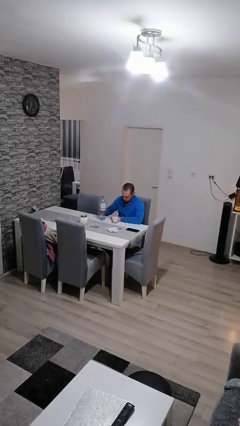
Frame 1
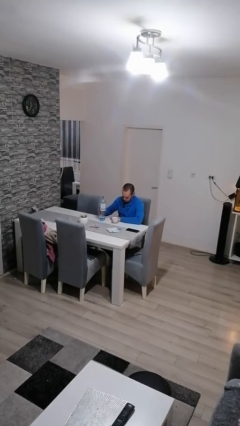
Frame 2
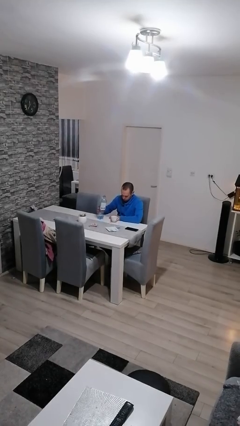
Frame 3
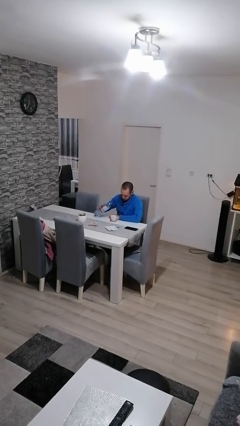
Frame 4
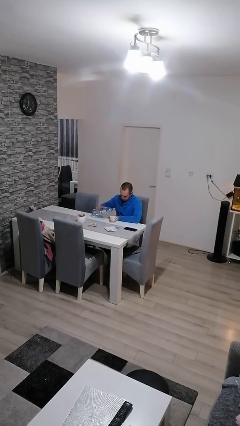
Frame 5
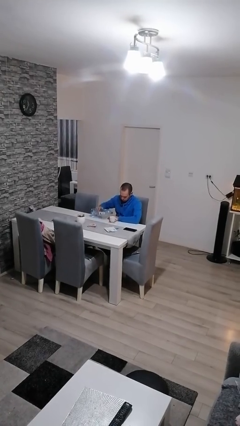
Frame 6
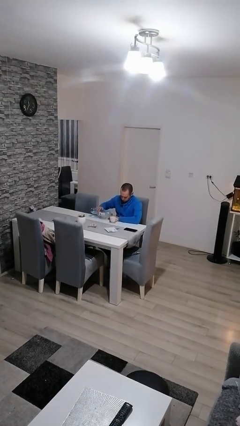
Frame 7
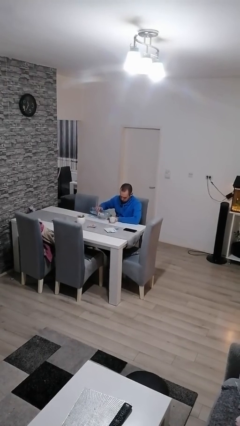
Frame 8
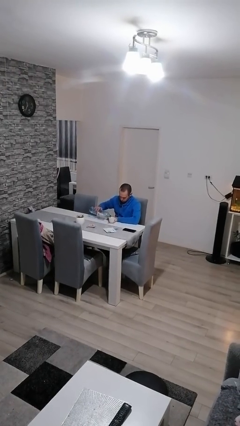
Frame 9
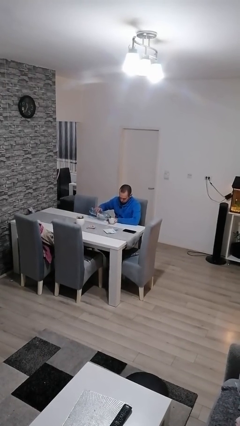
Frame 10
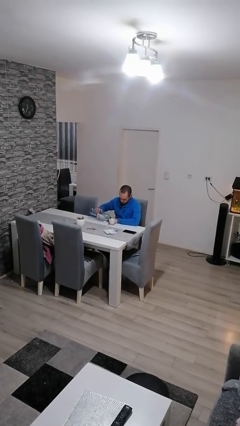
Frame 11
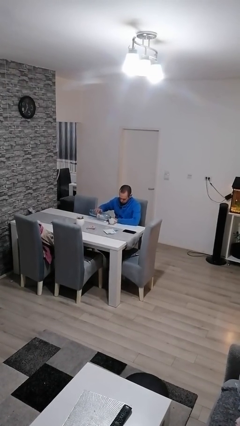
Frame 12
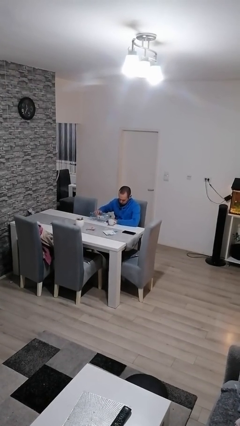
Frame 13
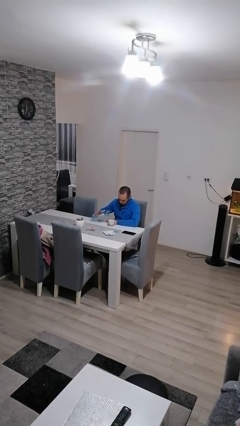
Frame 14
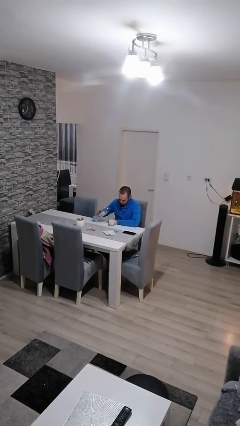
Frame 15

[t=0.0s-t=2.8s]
person pours liquid into cup

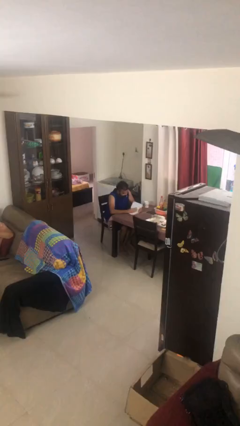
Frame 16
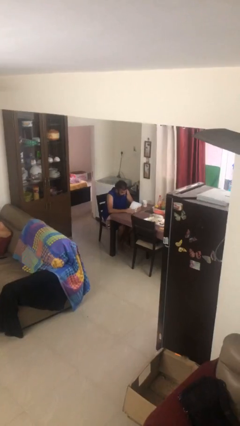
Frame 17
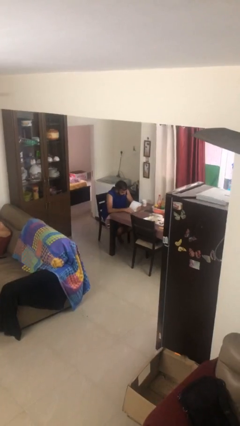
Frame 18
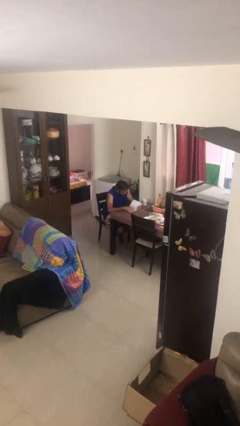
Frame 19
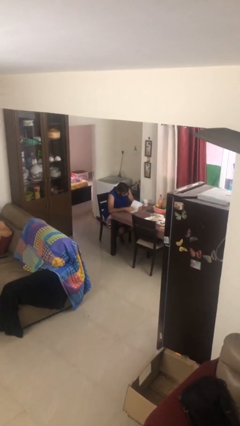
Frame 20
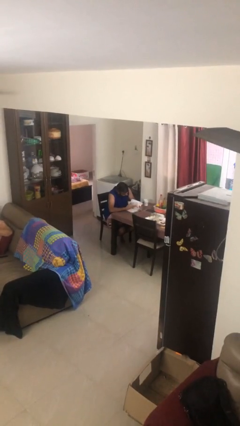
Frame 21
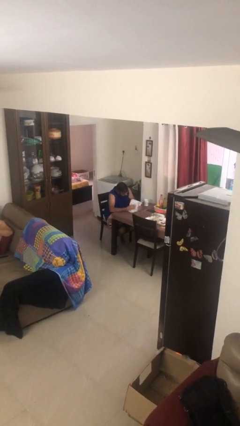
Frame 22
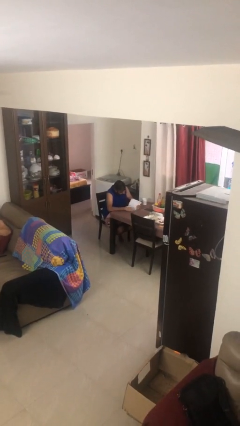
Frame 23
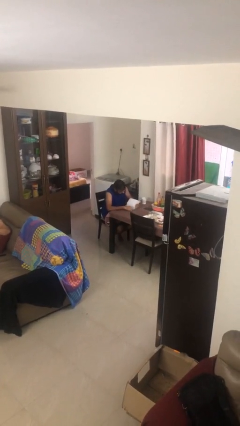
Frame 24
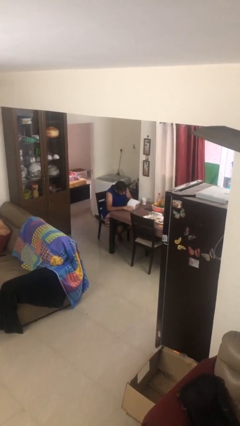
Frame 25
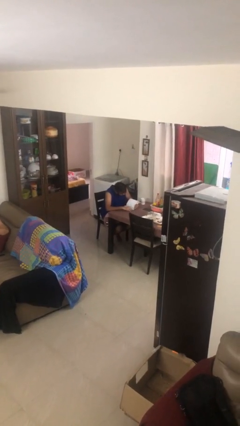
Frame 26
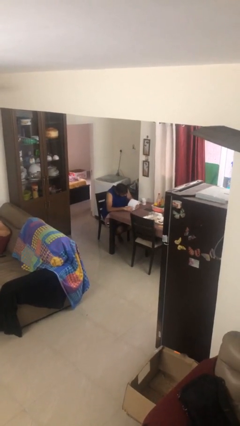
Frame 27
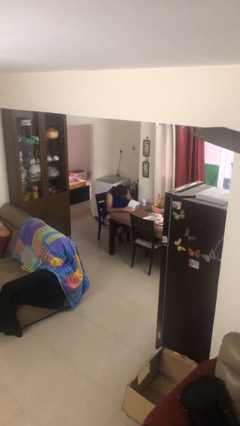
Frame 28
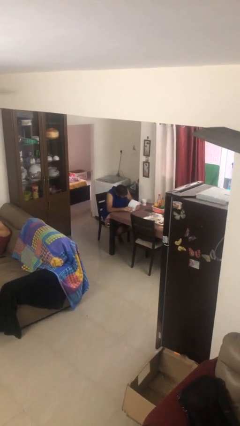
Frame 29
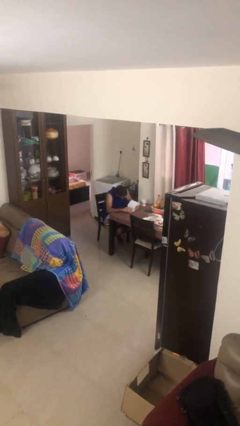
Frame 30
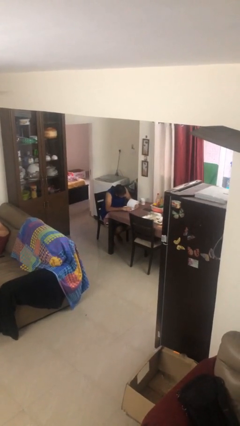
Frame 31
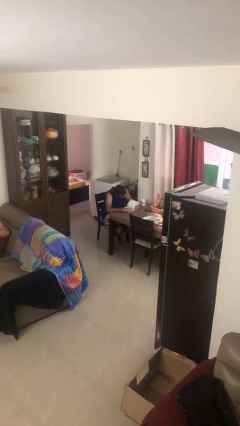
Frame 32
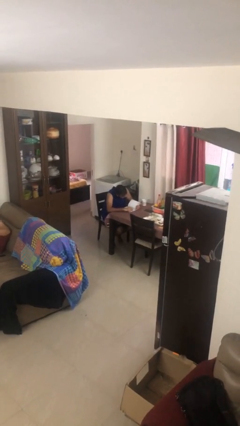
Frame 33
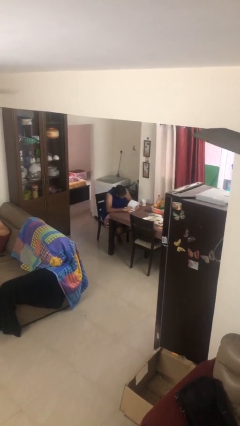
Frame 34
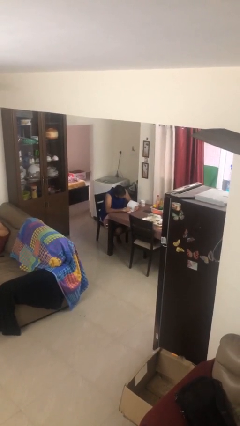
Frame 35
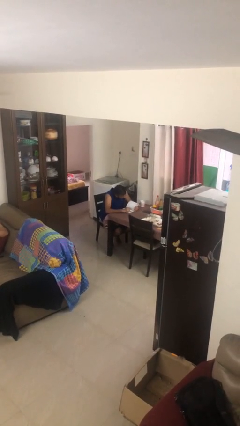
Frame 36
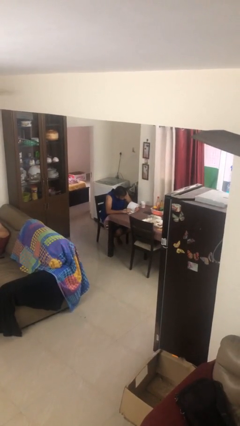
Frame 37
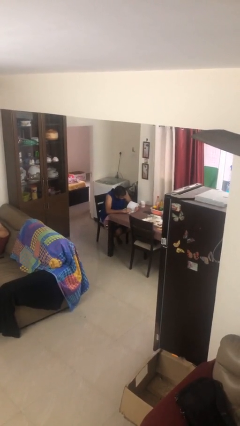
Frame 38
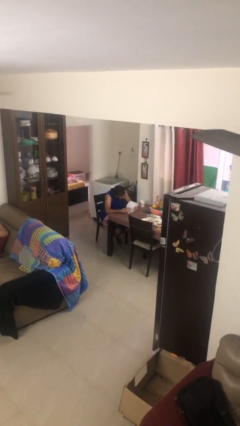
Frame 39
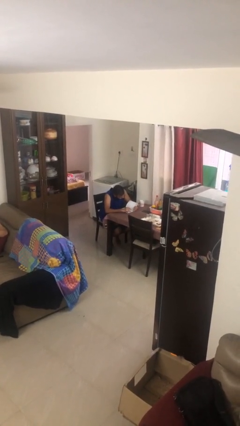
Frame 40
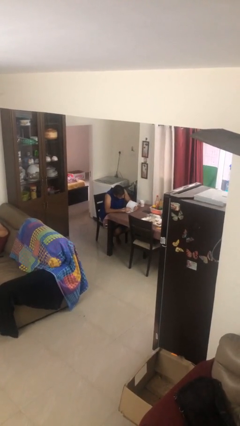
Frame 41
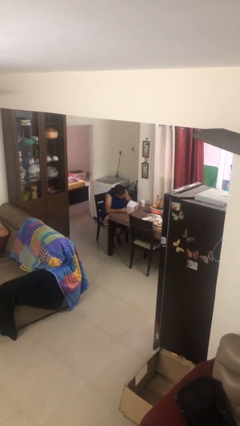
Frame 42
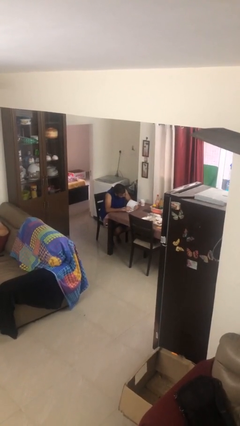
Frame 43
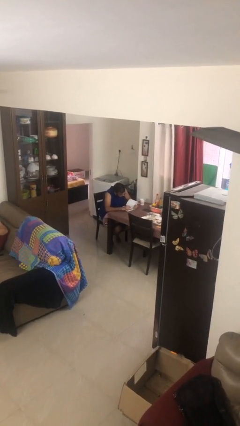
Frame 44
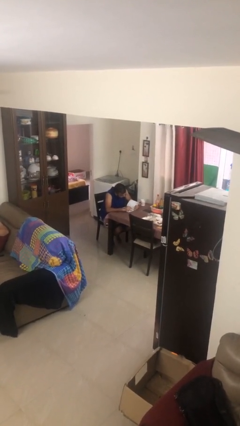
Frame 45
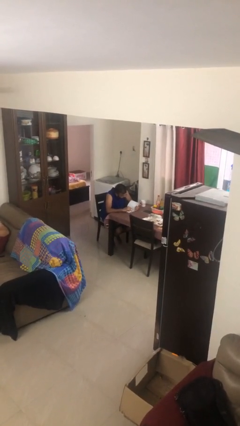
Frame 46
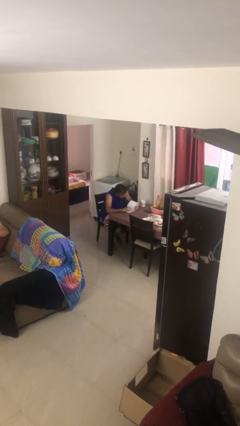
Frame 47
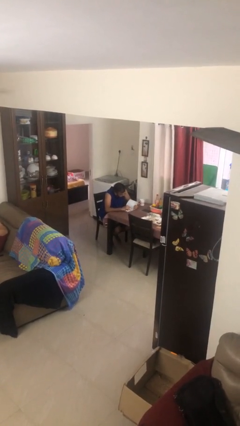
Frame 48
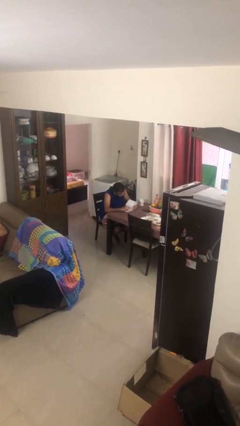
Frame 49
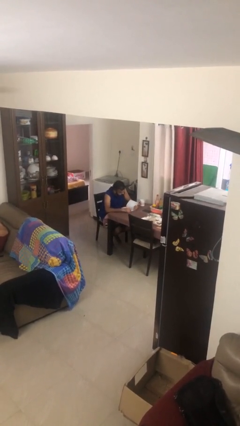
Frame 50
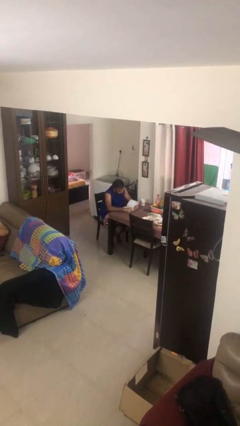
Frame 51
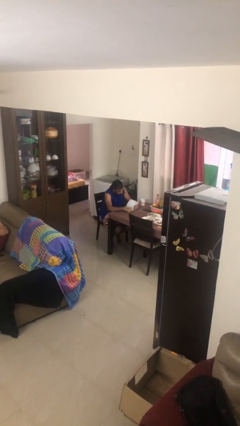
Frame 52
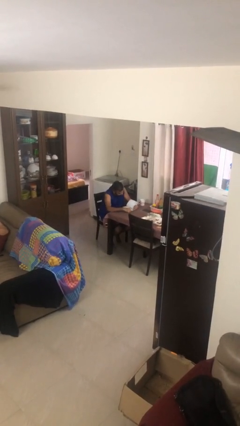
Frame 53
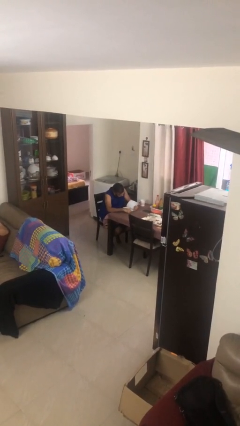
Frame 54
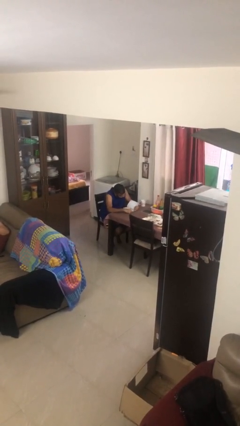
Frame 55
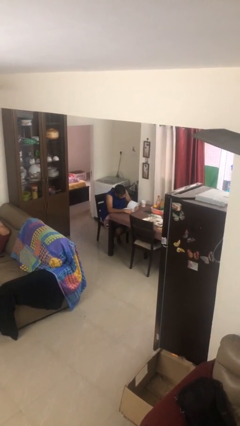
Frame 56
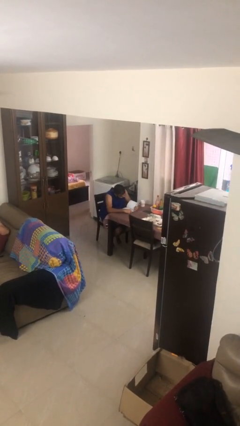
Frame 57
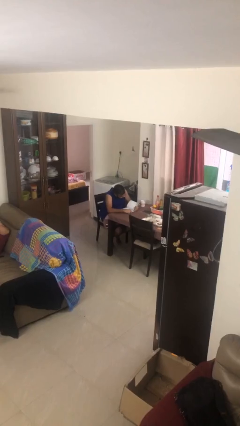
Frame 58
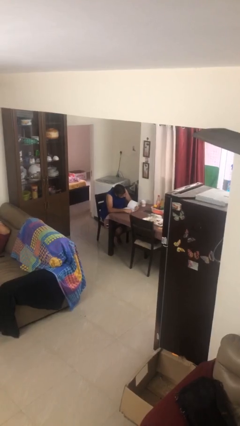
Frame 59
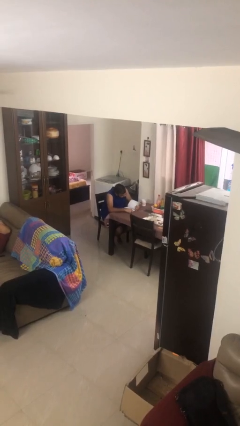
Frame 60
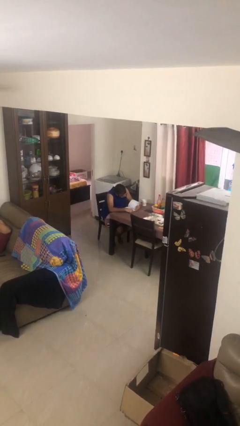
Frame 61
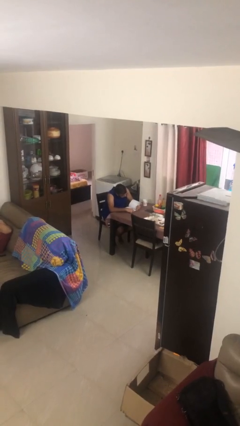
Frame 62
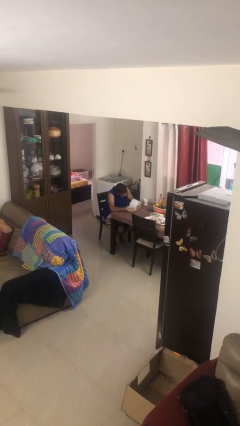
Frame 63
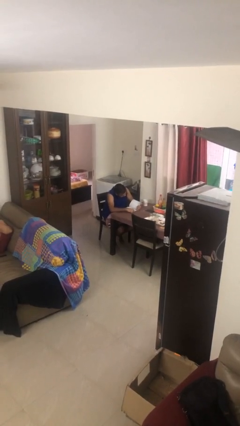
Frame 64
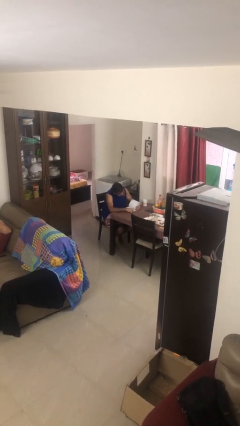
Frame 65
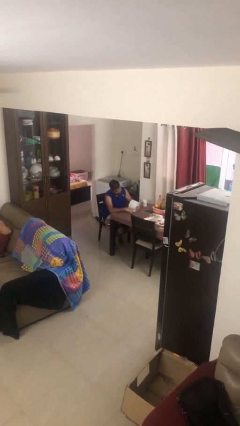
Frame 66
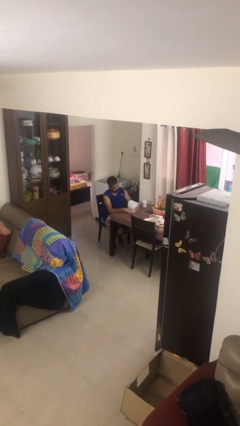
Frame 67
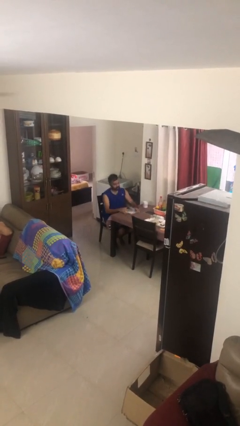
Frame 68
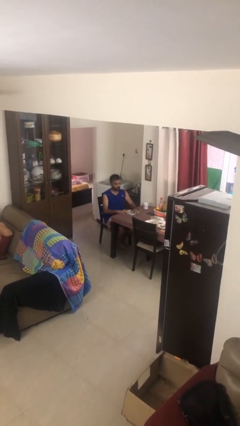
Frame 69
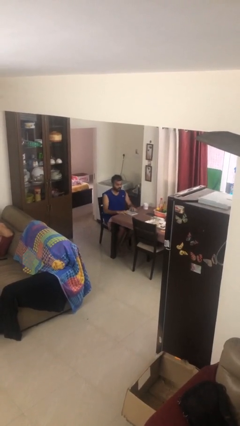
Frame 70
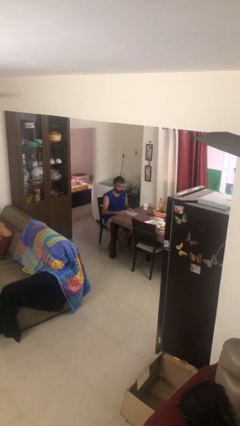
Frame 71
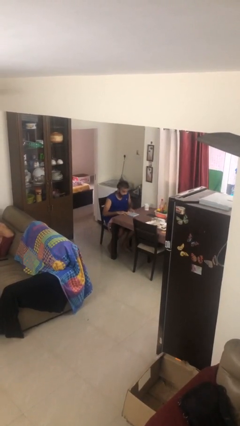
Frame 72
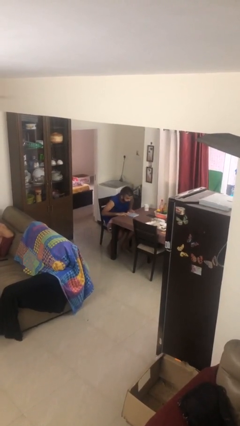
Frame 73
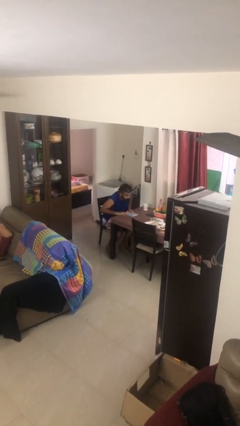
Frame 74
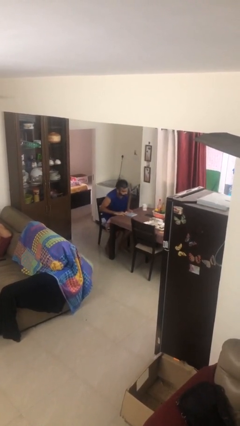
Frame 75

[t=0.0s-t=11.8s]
person reads document

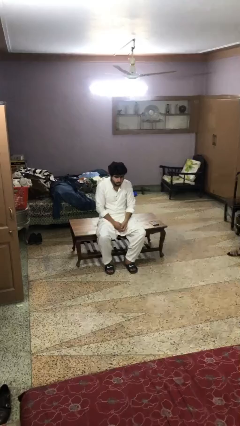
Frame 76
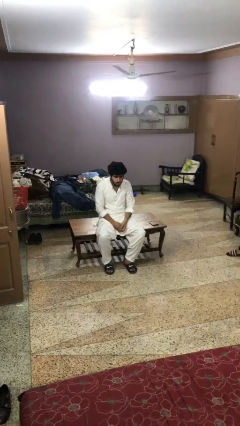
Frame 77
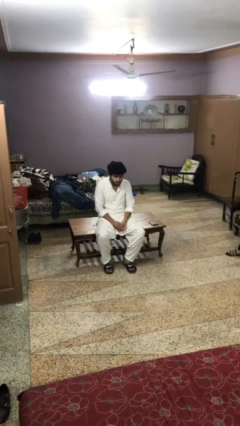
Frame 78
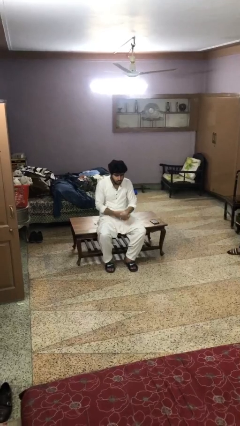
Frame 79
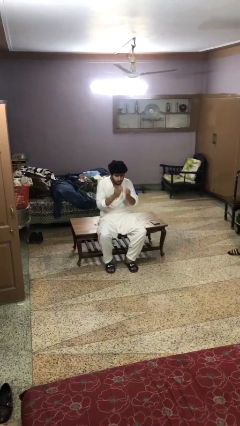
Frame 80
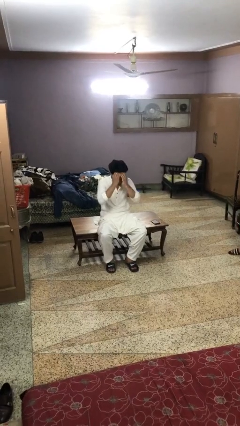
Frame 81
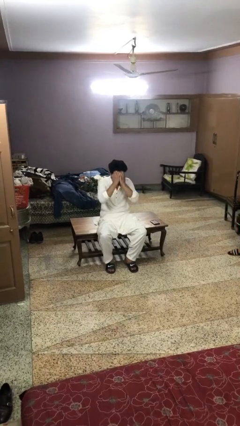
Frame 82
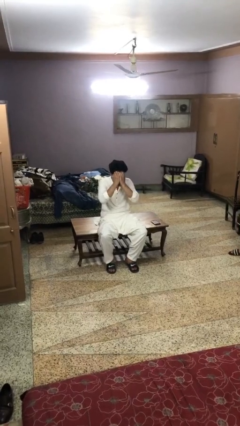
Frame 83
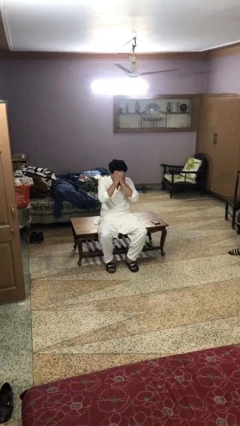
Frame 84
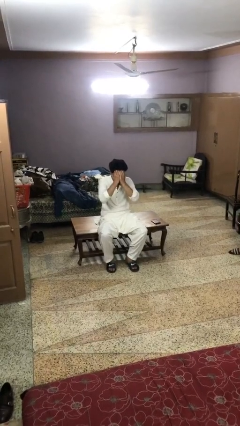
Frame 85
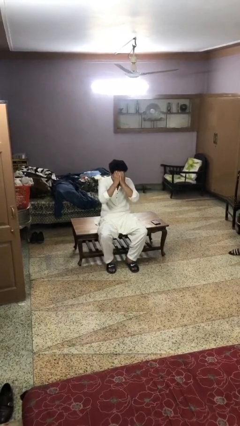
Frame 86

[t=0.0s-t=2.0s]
person covers face with hands

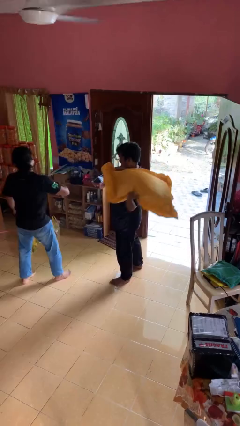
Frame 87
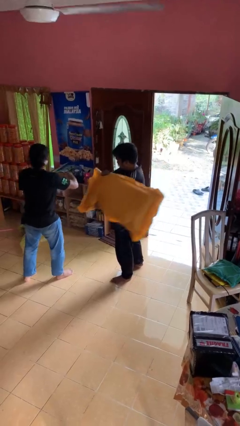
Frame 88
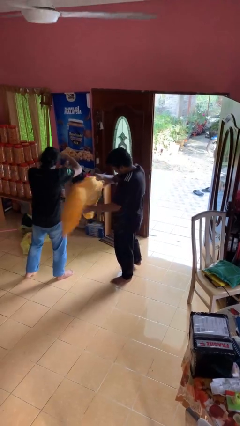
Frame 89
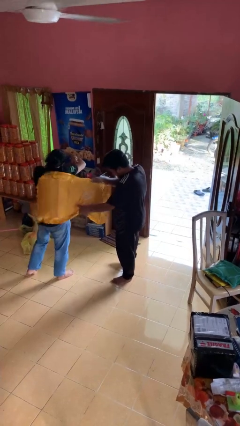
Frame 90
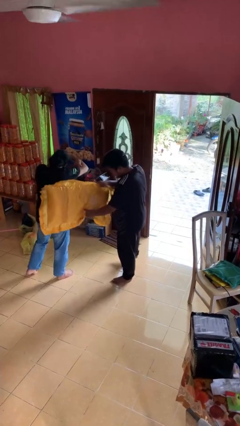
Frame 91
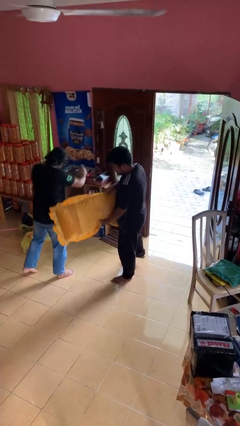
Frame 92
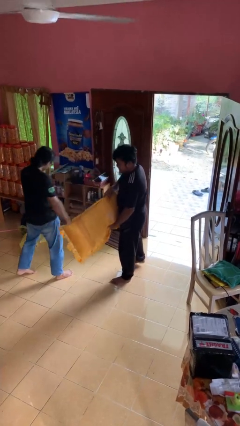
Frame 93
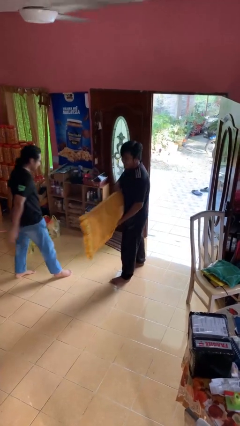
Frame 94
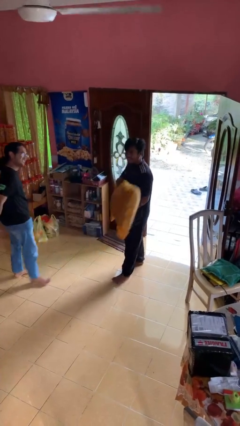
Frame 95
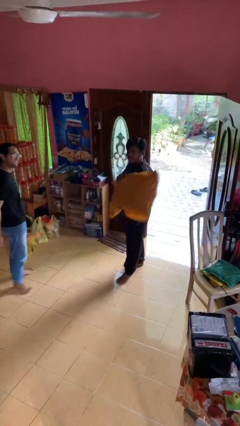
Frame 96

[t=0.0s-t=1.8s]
person hits person with pillow
